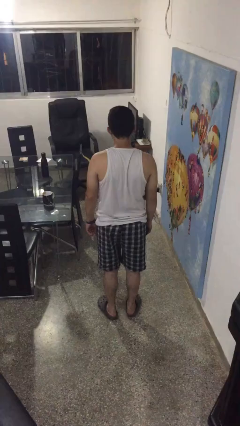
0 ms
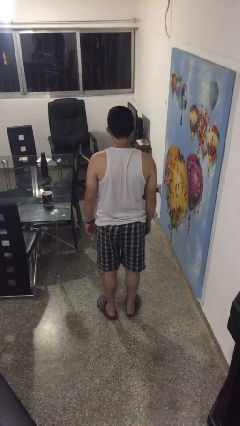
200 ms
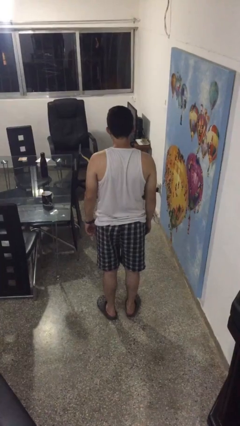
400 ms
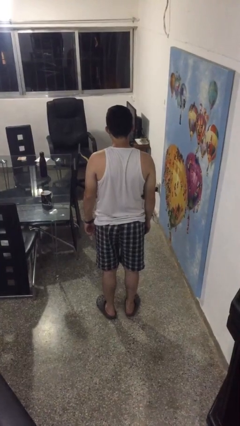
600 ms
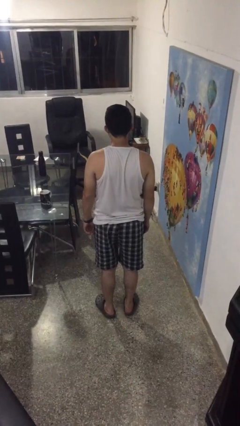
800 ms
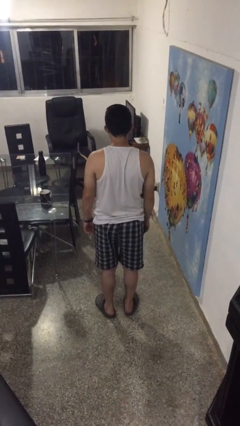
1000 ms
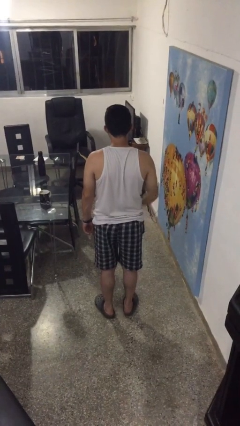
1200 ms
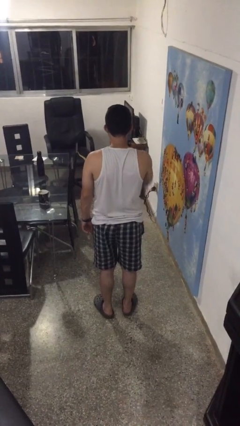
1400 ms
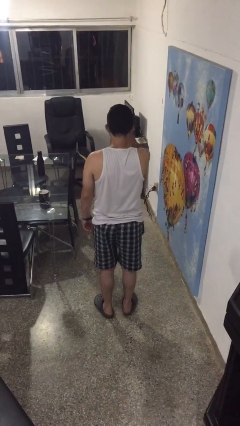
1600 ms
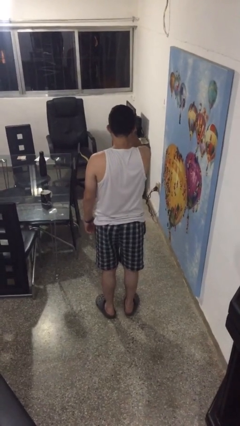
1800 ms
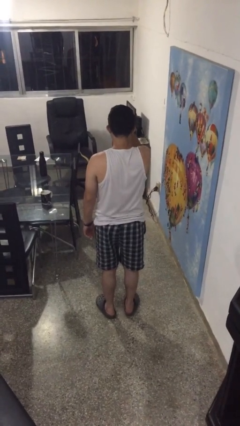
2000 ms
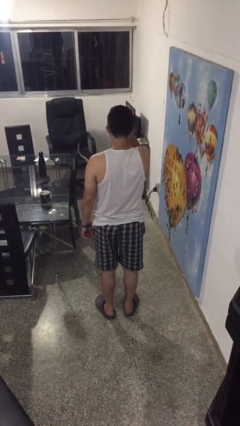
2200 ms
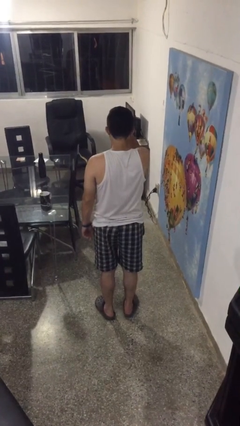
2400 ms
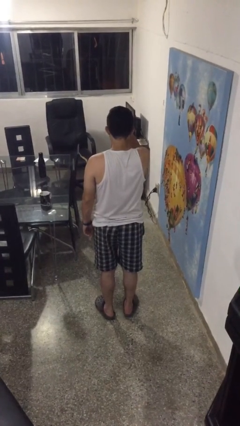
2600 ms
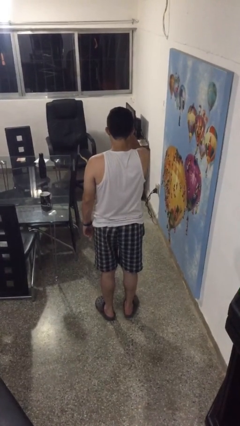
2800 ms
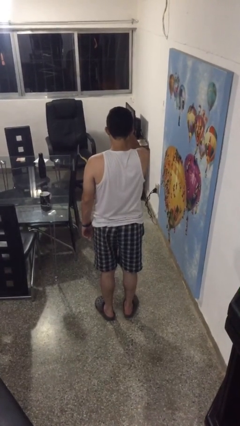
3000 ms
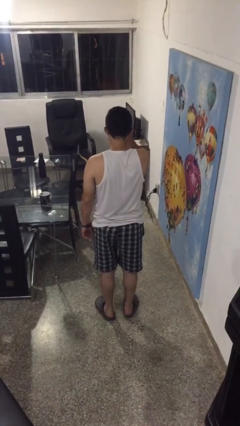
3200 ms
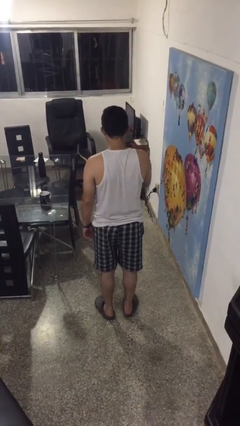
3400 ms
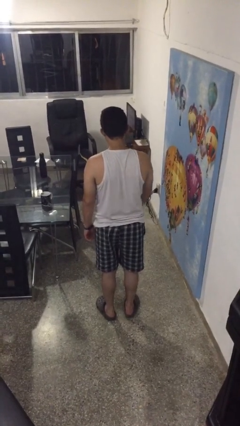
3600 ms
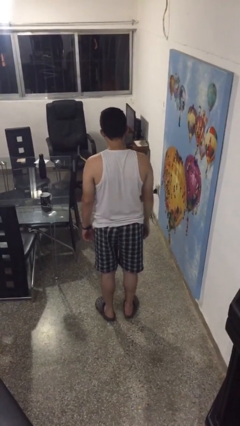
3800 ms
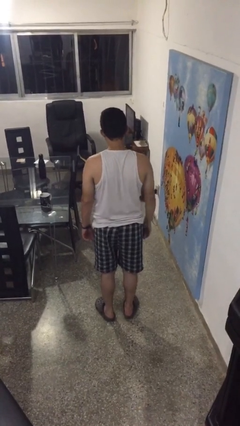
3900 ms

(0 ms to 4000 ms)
person scratches face

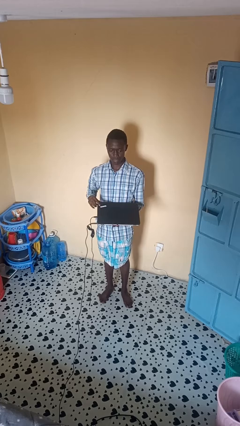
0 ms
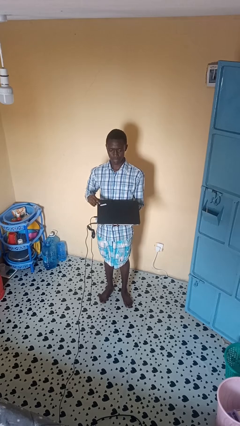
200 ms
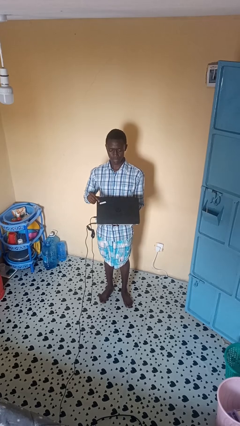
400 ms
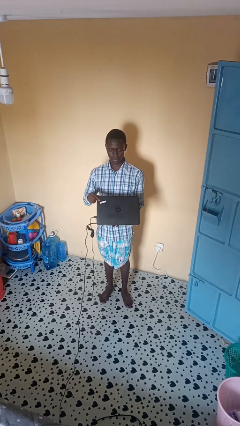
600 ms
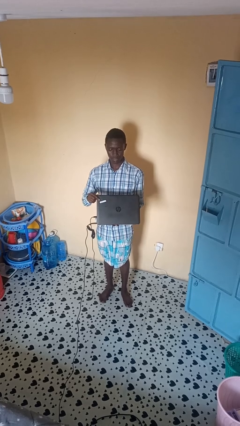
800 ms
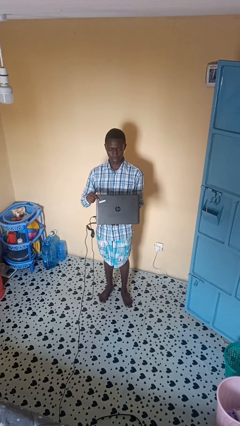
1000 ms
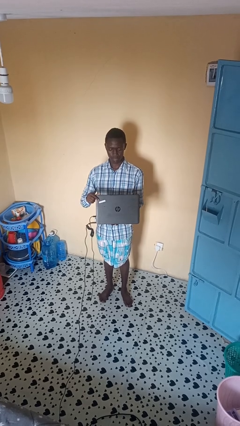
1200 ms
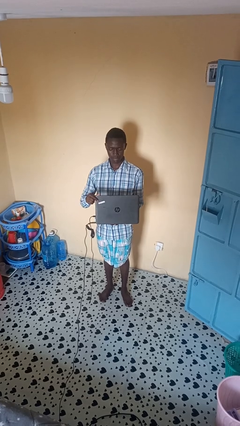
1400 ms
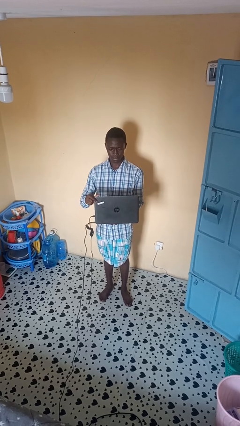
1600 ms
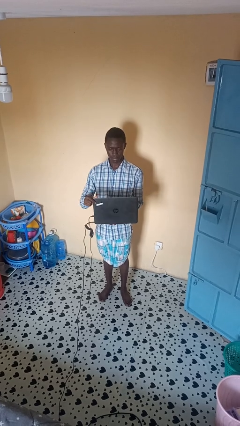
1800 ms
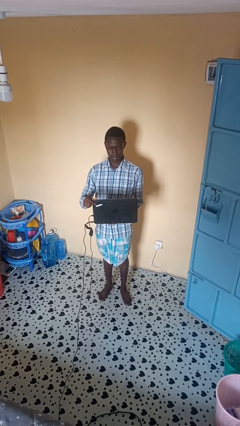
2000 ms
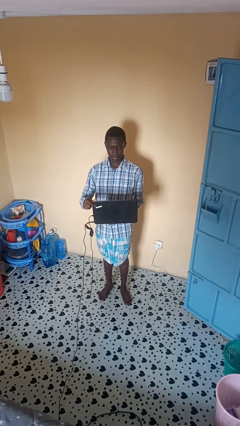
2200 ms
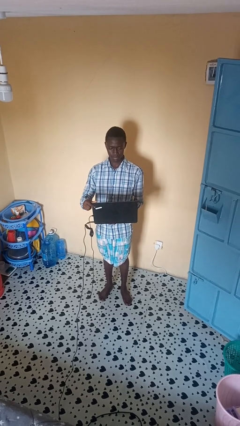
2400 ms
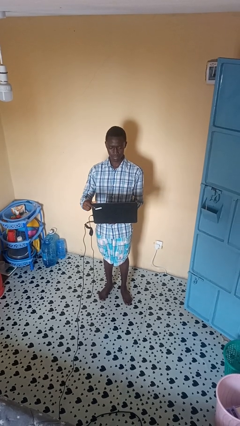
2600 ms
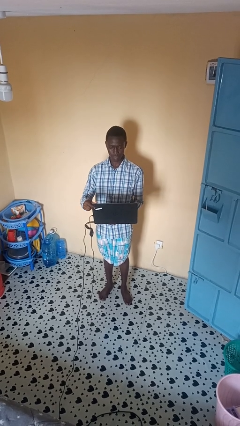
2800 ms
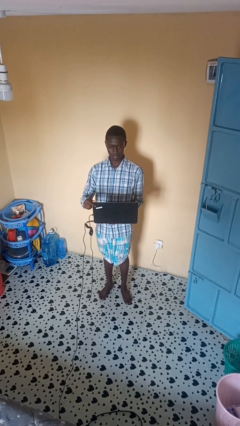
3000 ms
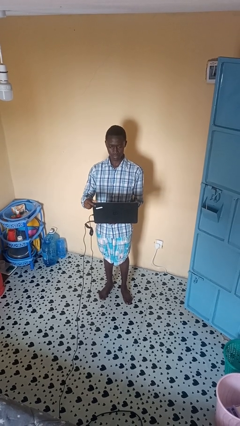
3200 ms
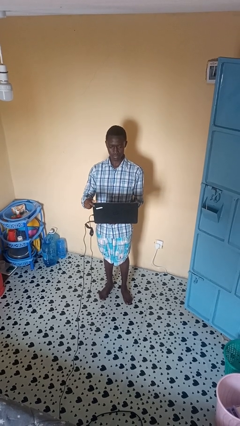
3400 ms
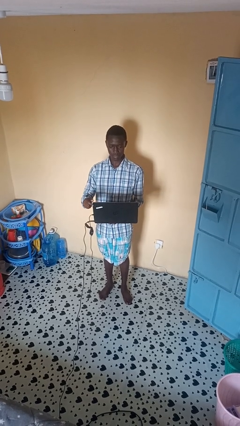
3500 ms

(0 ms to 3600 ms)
person opens laptop

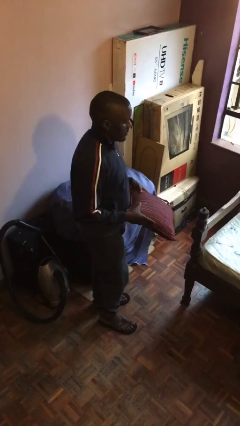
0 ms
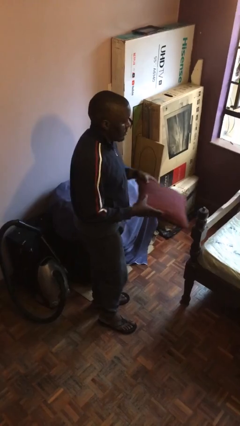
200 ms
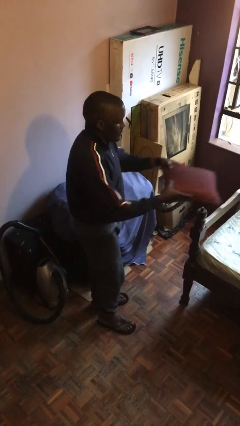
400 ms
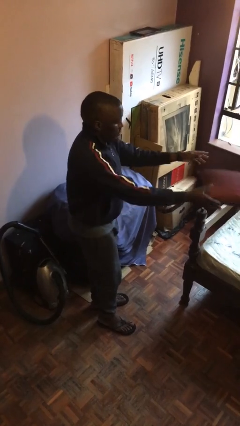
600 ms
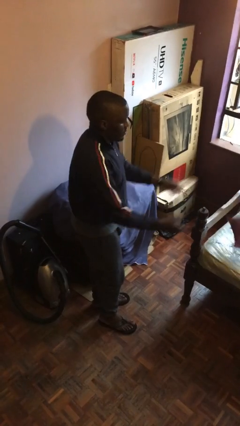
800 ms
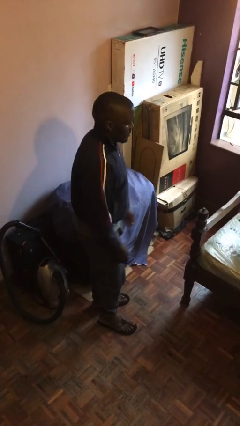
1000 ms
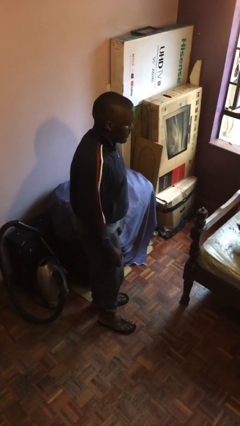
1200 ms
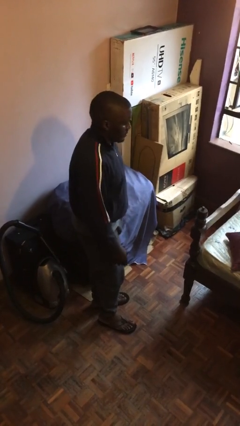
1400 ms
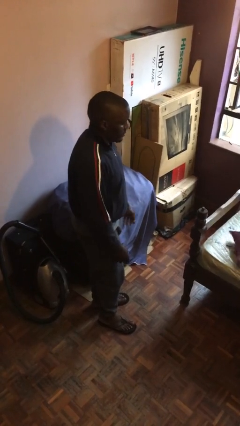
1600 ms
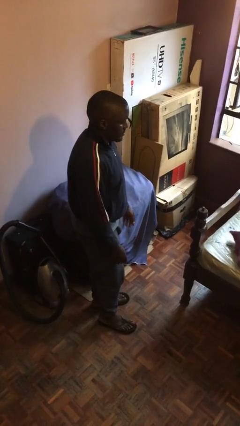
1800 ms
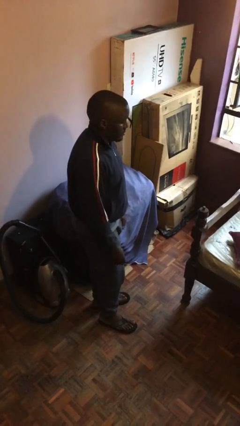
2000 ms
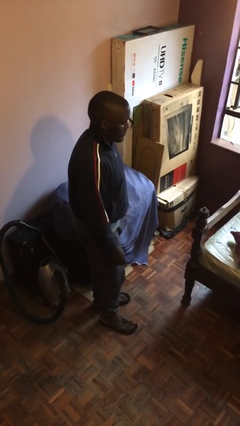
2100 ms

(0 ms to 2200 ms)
person throws object on bed

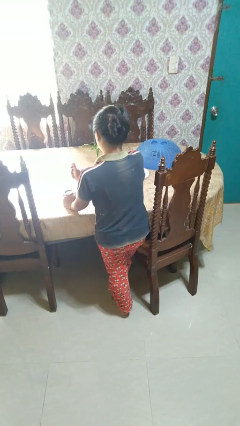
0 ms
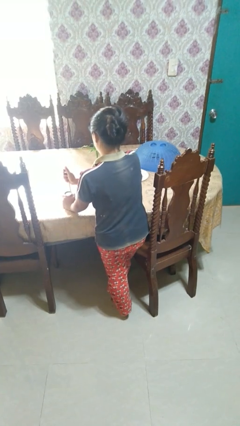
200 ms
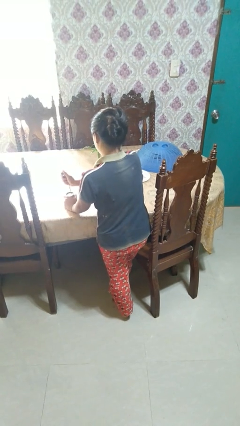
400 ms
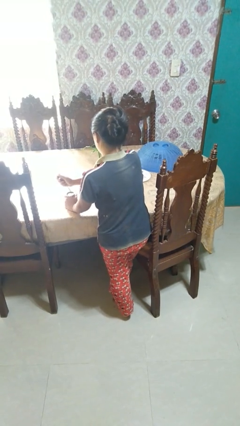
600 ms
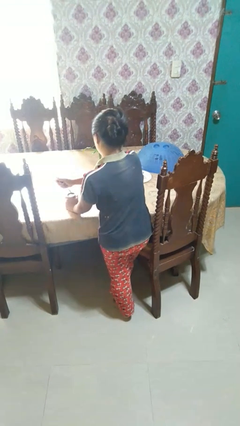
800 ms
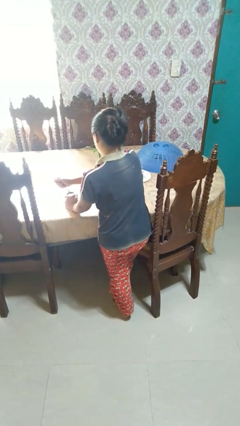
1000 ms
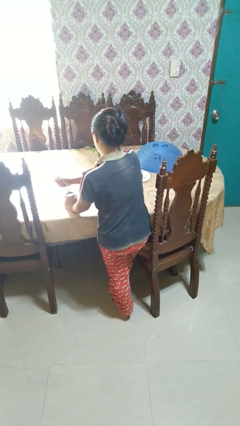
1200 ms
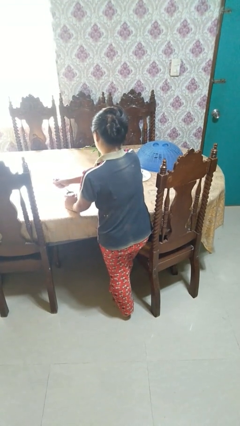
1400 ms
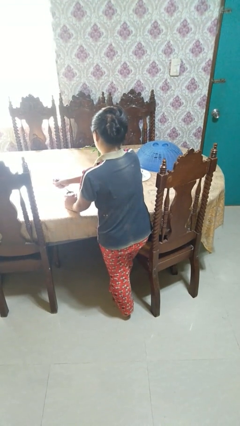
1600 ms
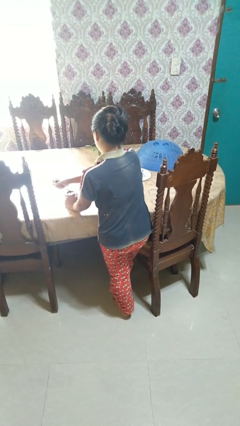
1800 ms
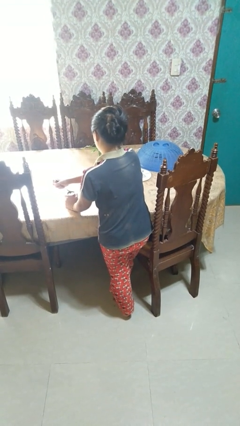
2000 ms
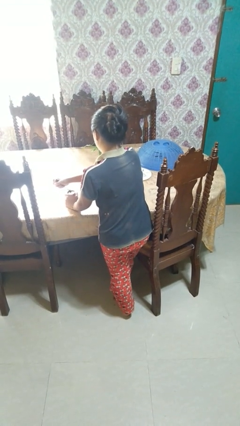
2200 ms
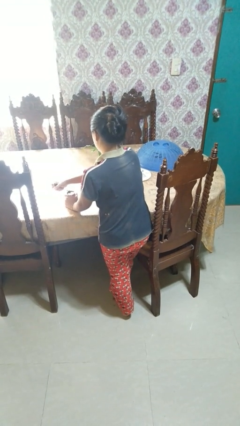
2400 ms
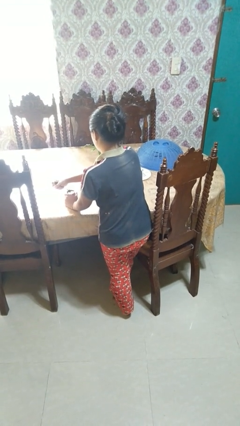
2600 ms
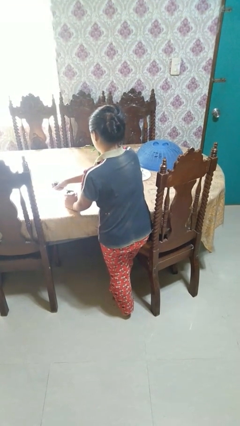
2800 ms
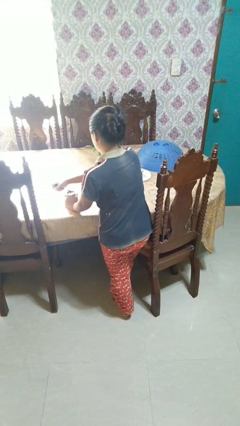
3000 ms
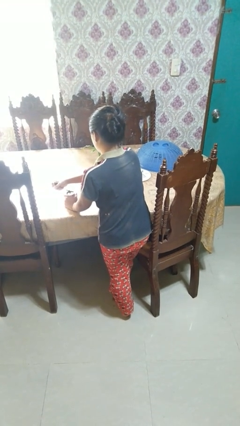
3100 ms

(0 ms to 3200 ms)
person opens can with can opener

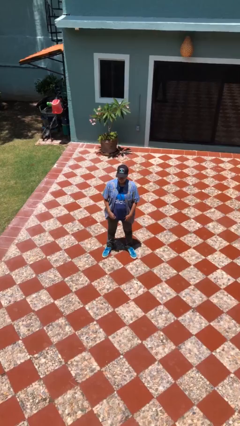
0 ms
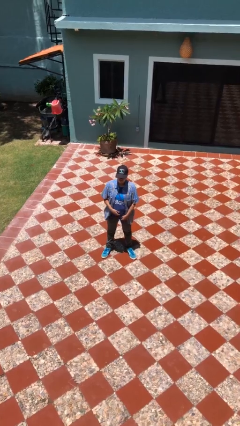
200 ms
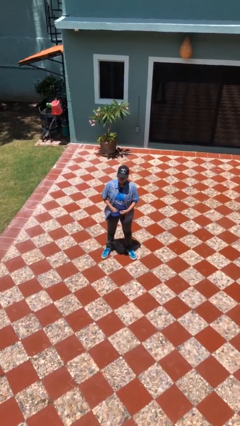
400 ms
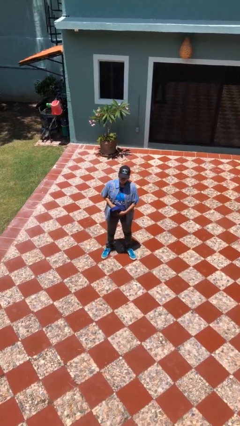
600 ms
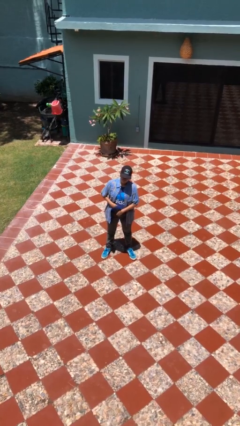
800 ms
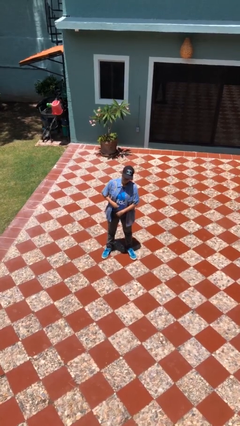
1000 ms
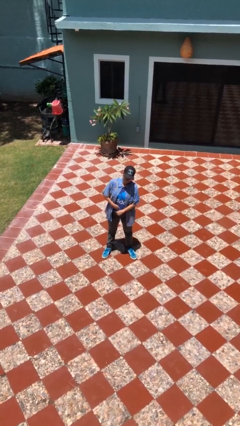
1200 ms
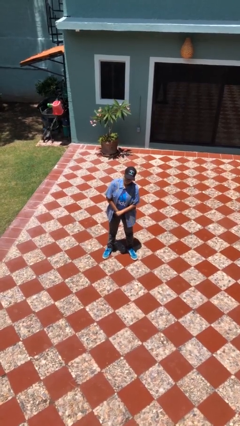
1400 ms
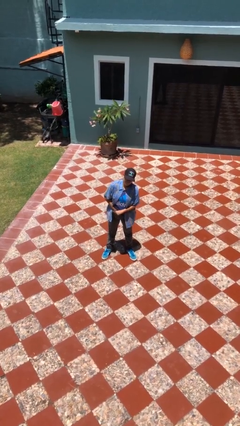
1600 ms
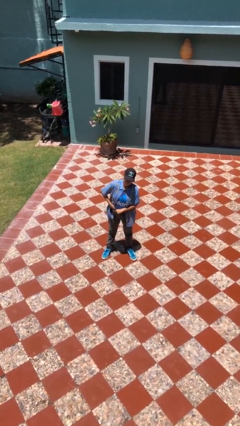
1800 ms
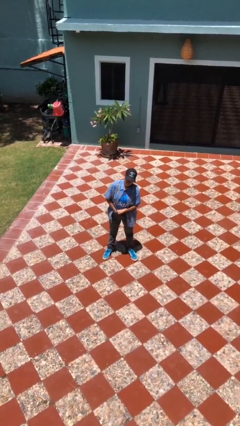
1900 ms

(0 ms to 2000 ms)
person tucks in shirt

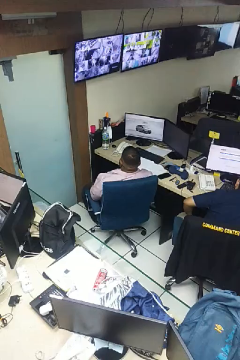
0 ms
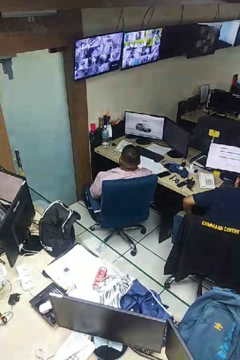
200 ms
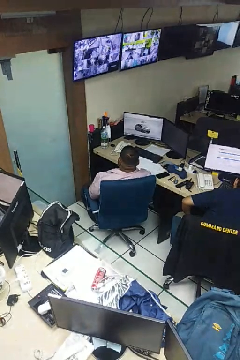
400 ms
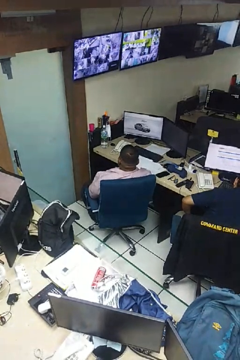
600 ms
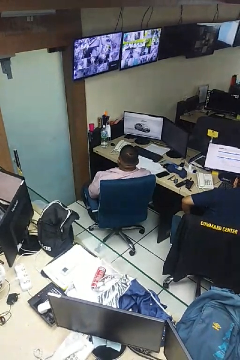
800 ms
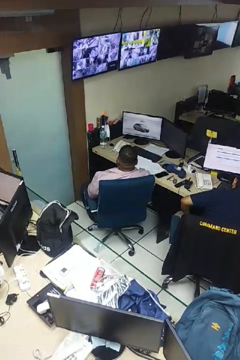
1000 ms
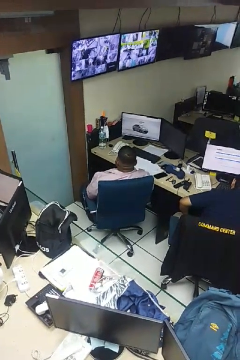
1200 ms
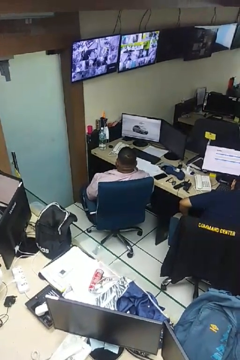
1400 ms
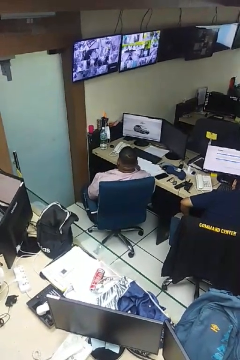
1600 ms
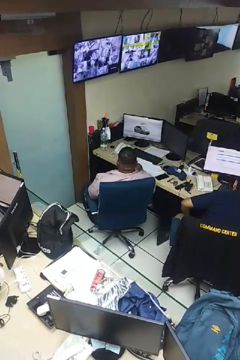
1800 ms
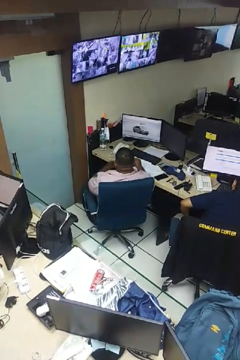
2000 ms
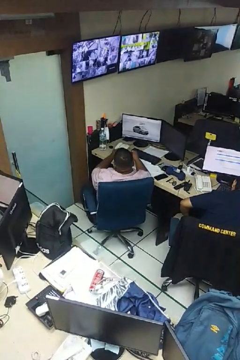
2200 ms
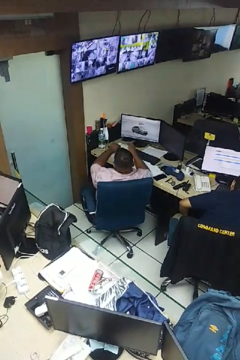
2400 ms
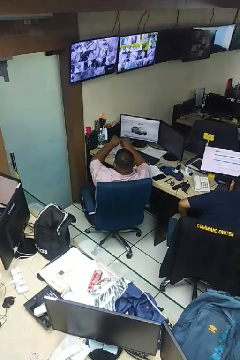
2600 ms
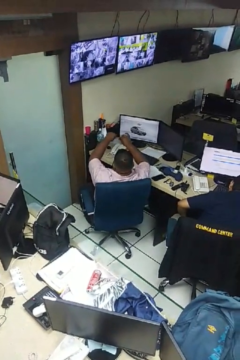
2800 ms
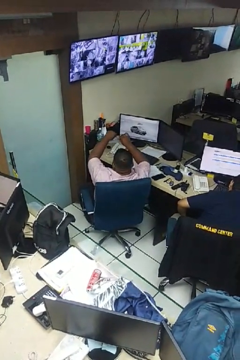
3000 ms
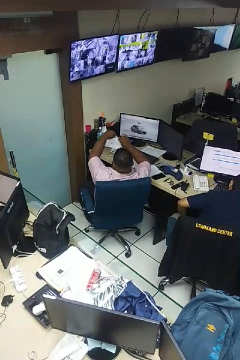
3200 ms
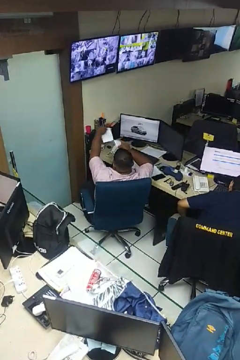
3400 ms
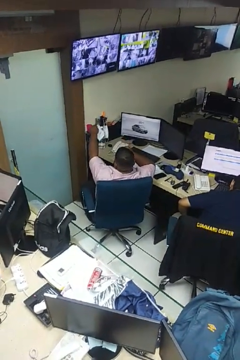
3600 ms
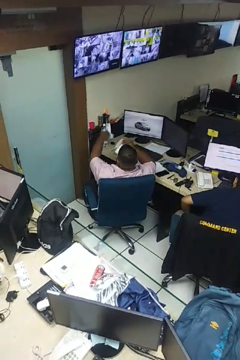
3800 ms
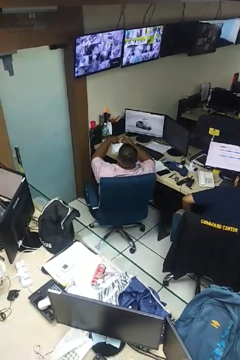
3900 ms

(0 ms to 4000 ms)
person tears paper
